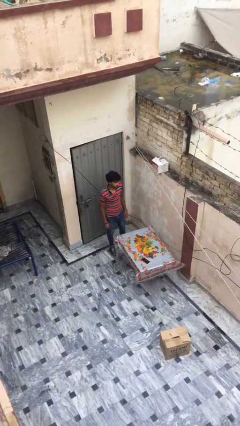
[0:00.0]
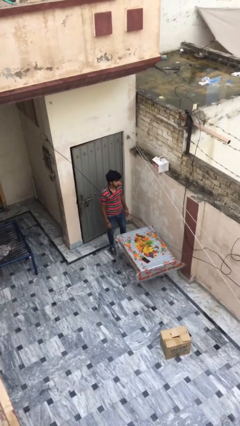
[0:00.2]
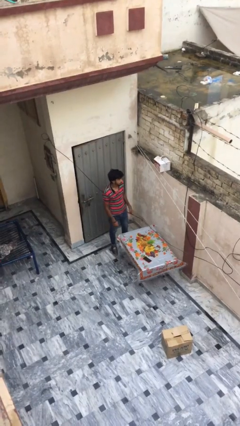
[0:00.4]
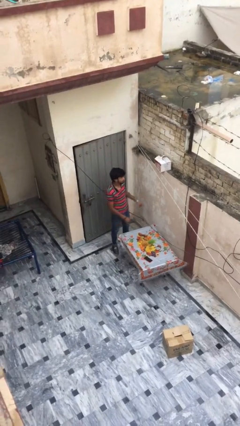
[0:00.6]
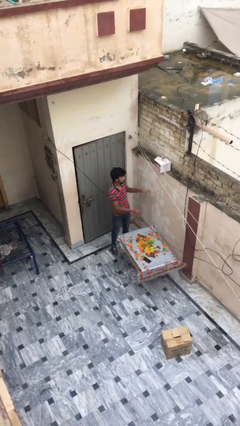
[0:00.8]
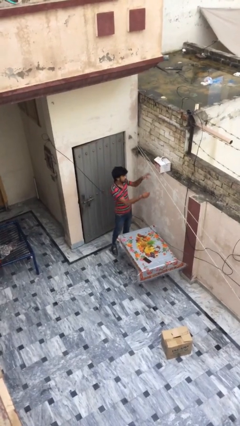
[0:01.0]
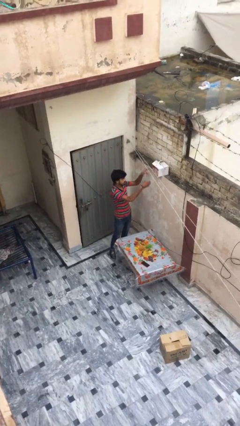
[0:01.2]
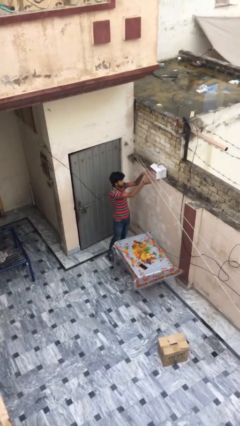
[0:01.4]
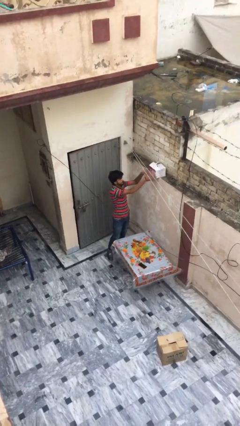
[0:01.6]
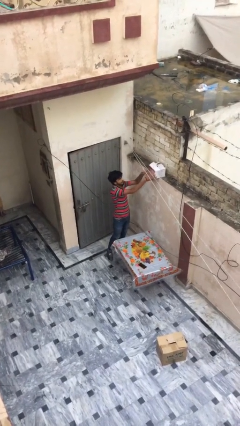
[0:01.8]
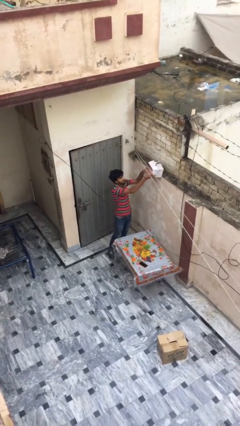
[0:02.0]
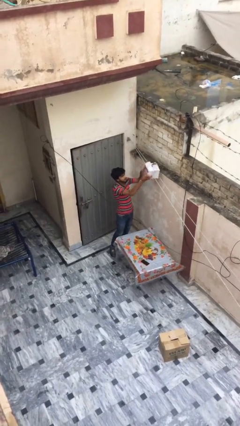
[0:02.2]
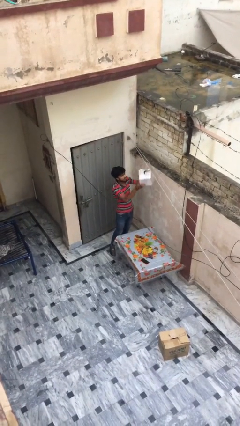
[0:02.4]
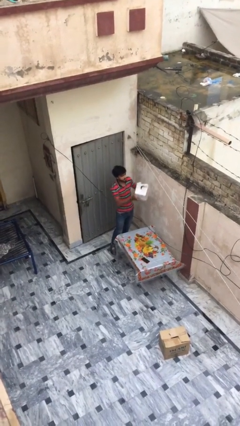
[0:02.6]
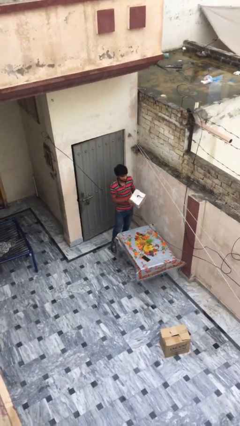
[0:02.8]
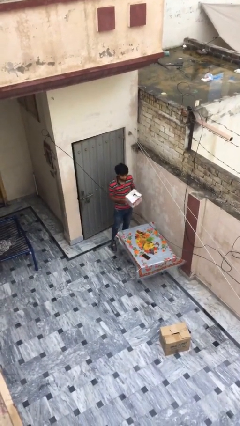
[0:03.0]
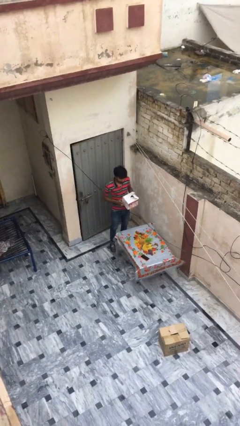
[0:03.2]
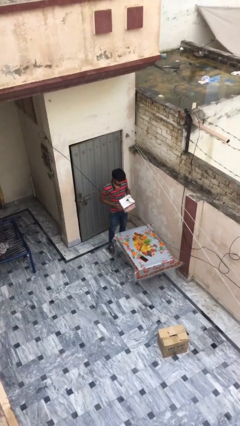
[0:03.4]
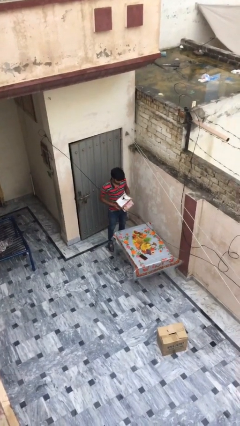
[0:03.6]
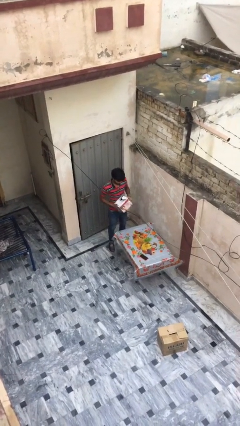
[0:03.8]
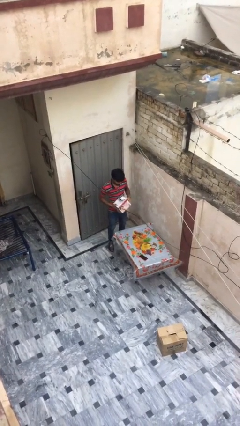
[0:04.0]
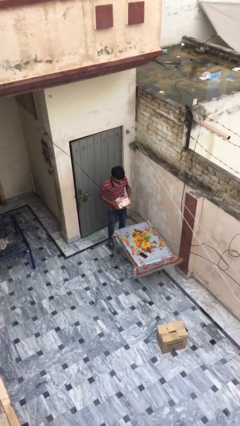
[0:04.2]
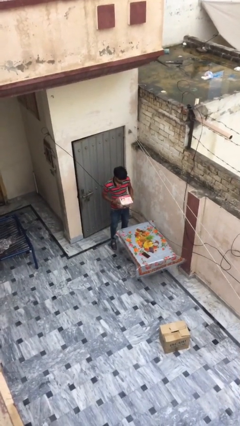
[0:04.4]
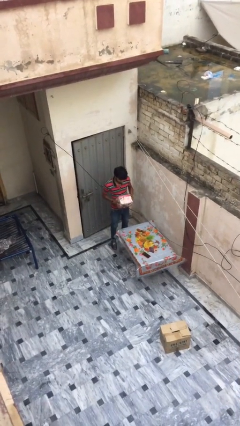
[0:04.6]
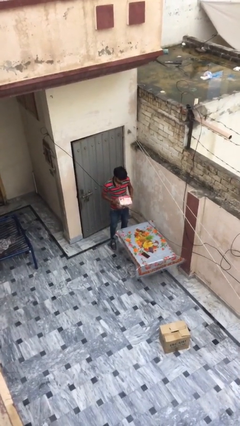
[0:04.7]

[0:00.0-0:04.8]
person picks up object from shelf

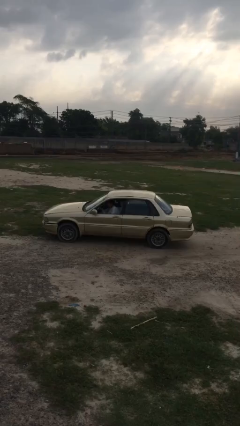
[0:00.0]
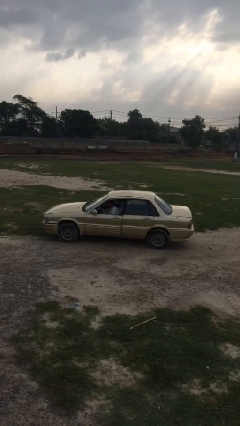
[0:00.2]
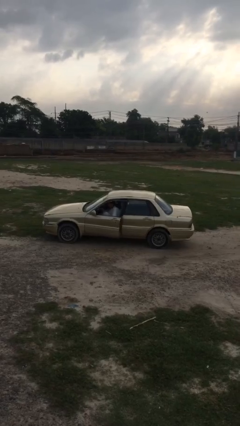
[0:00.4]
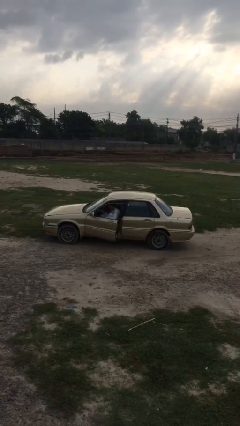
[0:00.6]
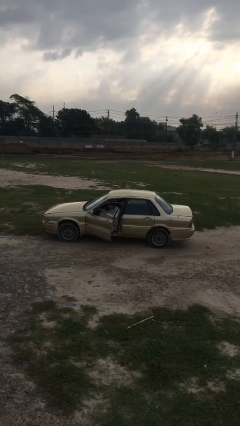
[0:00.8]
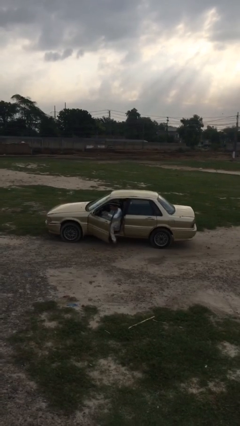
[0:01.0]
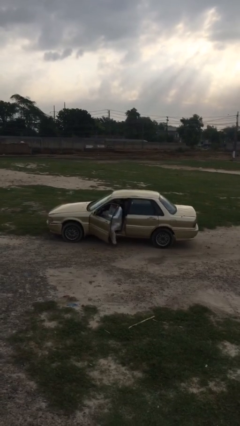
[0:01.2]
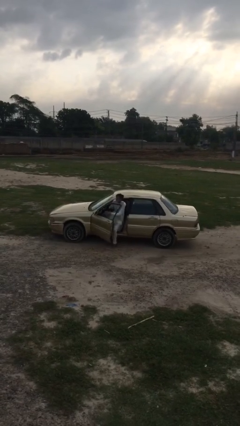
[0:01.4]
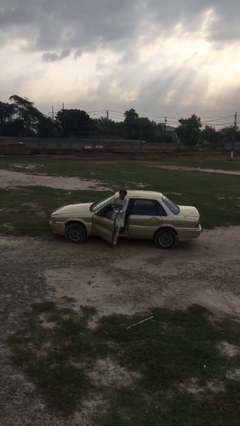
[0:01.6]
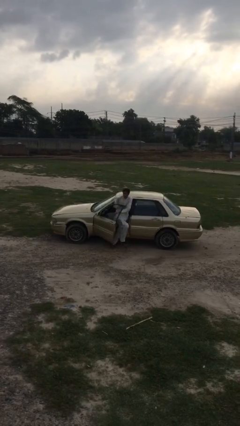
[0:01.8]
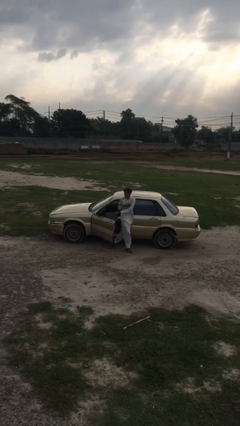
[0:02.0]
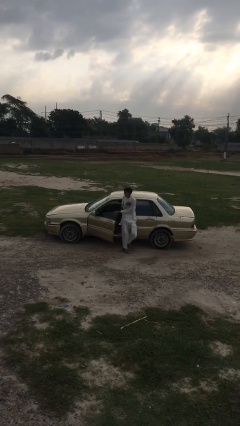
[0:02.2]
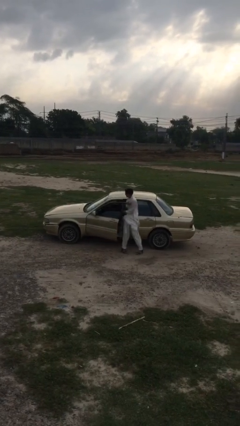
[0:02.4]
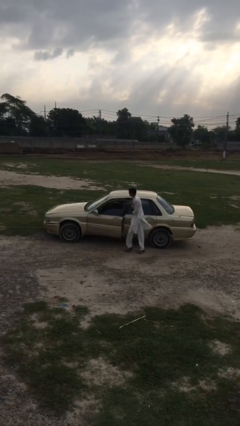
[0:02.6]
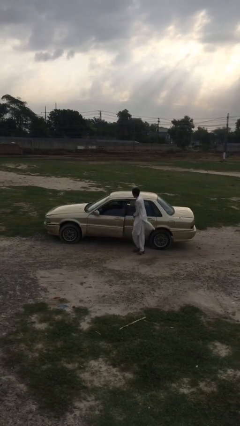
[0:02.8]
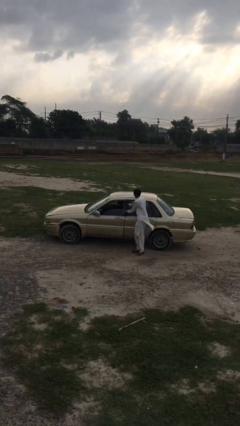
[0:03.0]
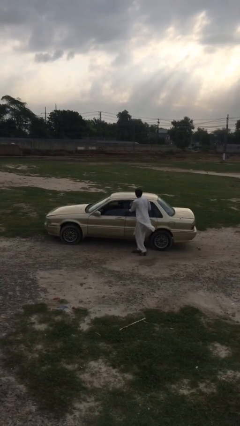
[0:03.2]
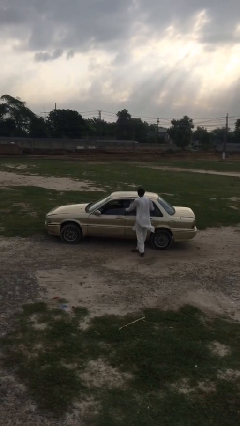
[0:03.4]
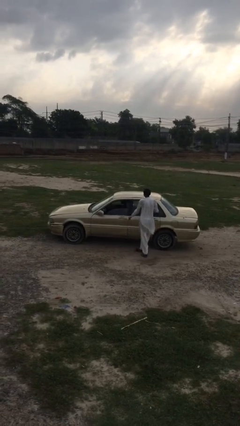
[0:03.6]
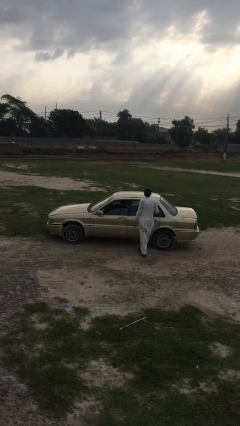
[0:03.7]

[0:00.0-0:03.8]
car drops off person

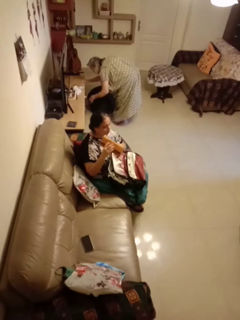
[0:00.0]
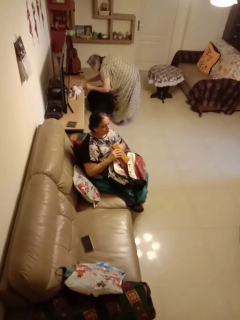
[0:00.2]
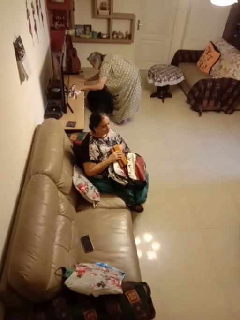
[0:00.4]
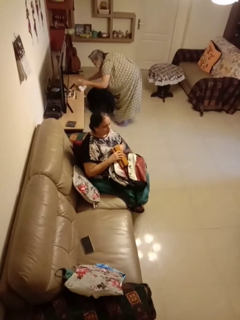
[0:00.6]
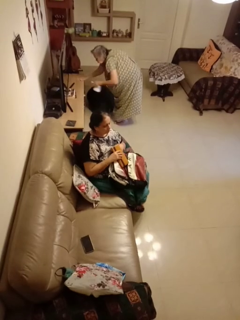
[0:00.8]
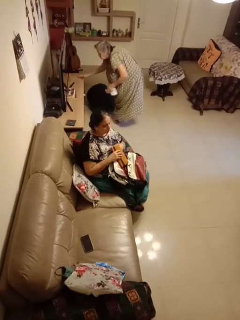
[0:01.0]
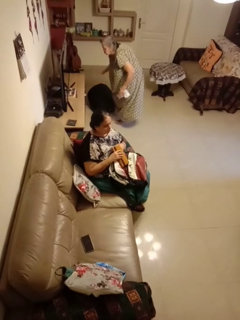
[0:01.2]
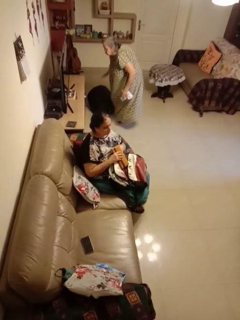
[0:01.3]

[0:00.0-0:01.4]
person takes object from backpack

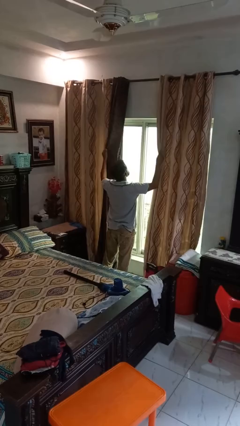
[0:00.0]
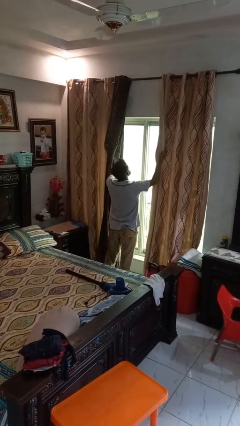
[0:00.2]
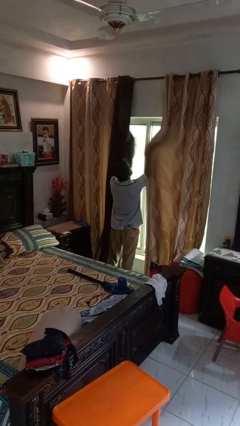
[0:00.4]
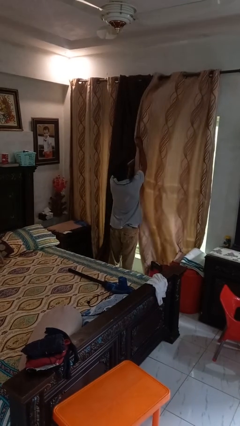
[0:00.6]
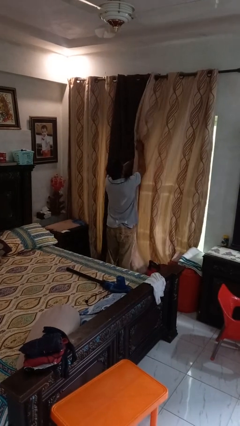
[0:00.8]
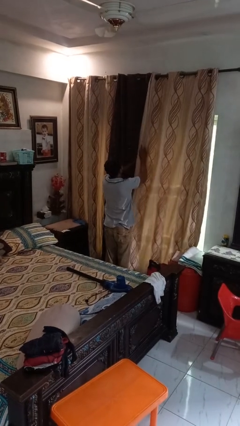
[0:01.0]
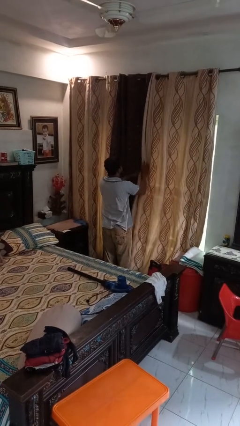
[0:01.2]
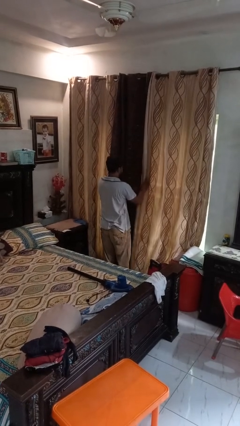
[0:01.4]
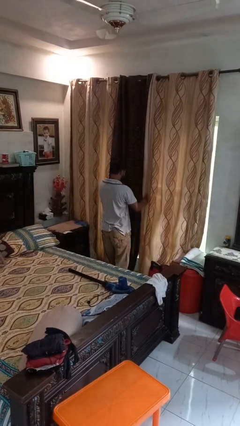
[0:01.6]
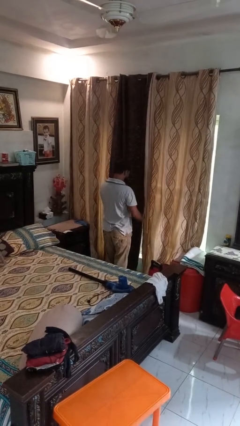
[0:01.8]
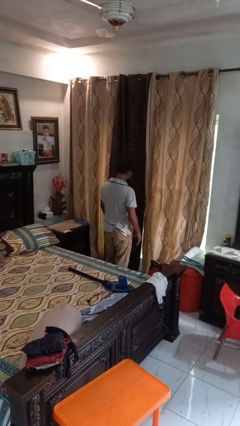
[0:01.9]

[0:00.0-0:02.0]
person closes curtains

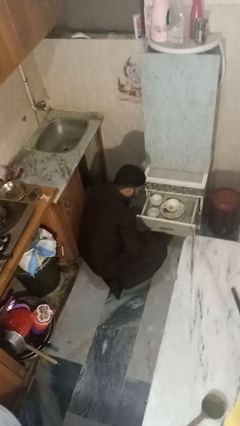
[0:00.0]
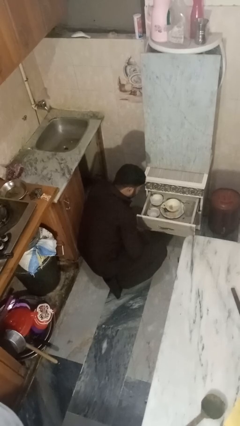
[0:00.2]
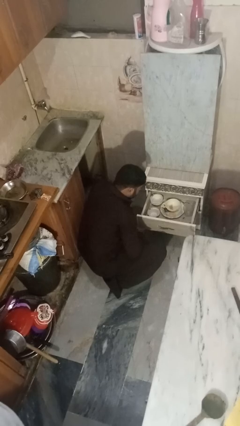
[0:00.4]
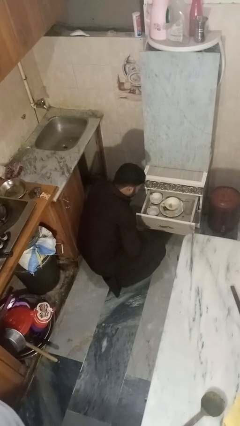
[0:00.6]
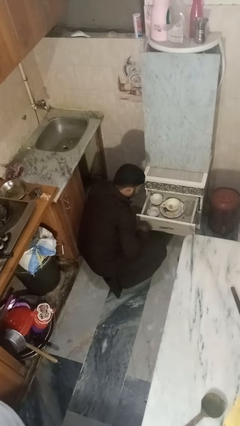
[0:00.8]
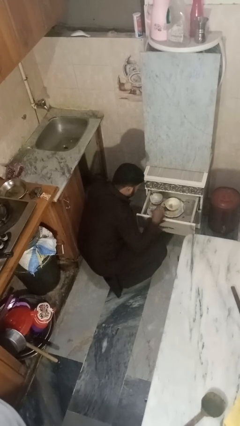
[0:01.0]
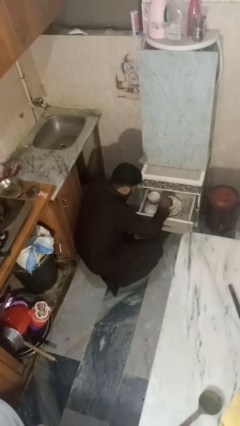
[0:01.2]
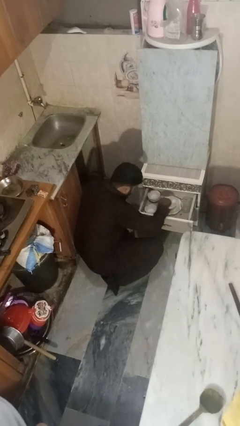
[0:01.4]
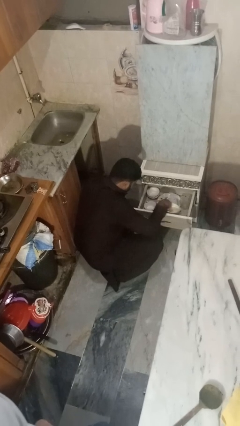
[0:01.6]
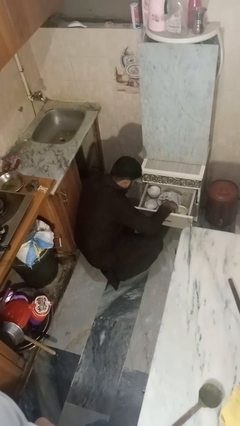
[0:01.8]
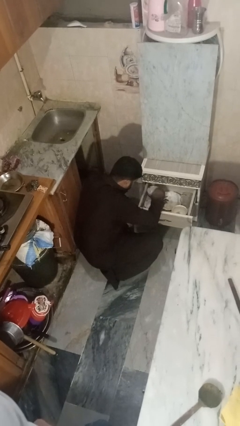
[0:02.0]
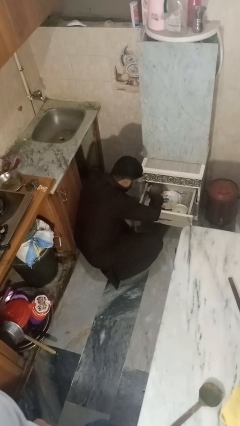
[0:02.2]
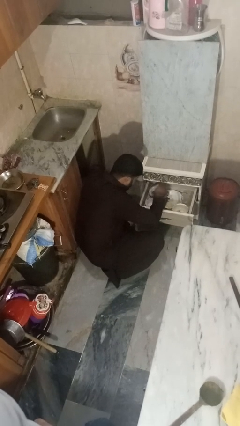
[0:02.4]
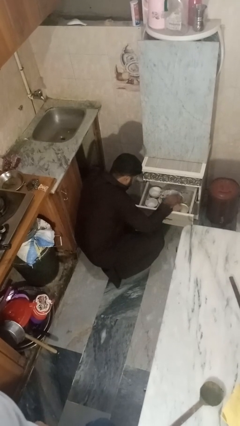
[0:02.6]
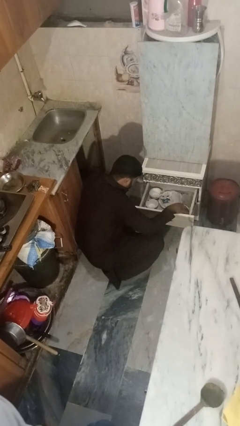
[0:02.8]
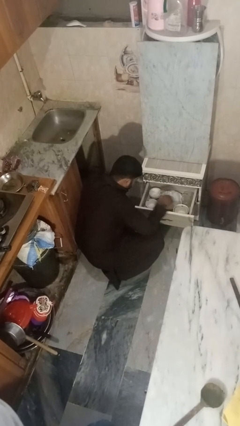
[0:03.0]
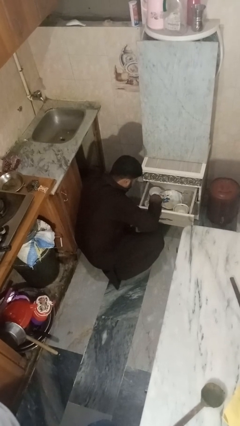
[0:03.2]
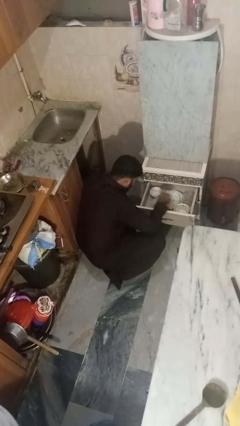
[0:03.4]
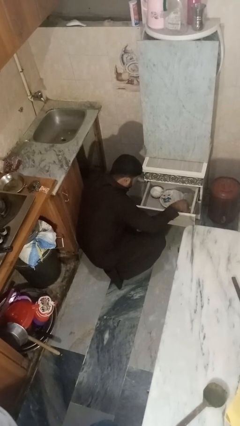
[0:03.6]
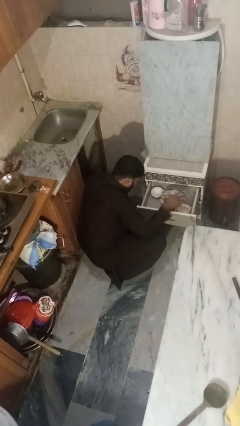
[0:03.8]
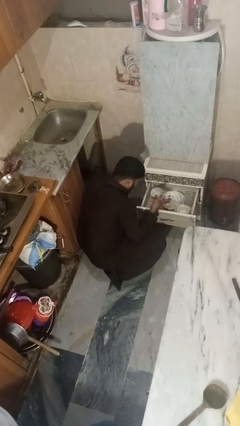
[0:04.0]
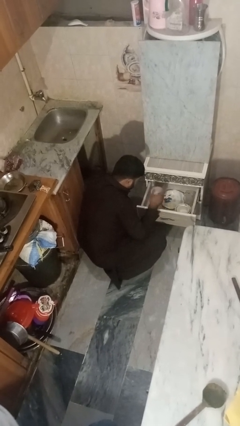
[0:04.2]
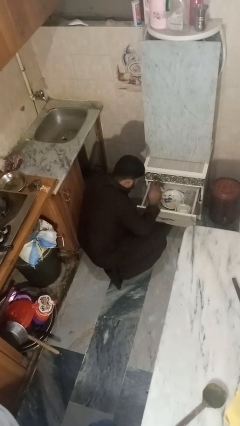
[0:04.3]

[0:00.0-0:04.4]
person searches in kitchen drawer

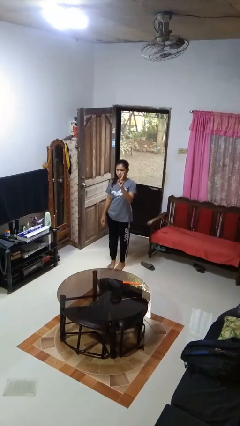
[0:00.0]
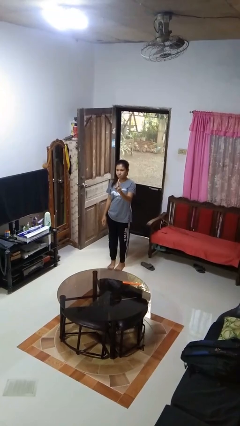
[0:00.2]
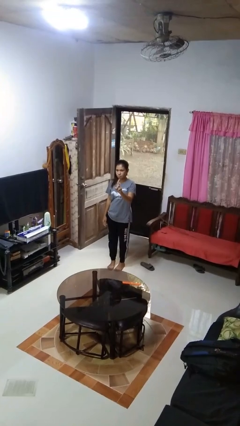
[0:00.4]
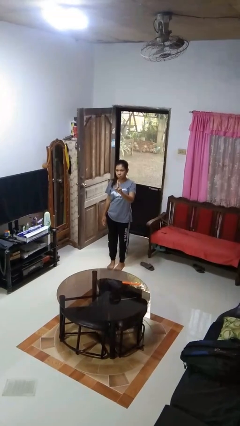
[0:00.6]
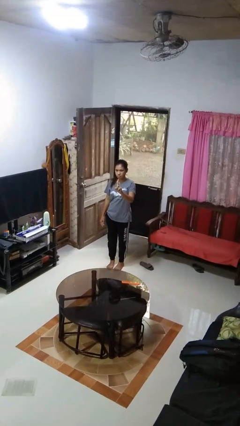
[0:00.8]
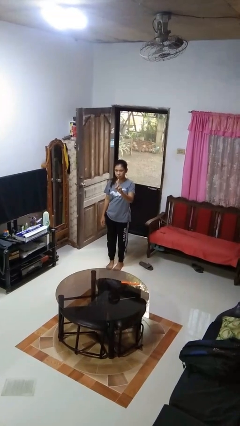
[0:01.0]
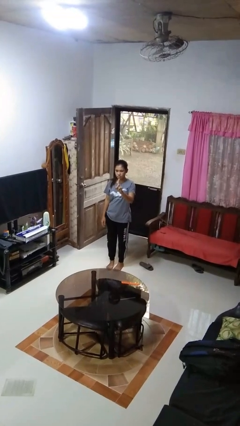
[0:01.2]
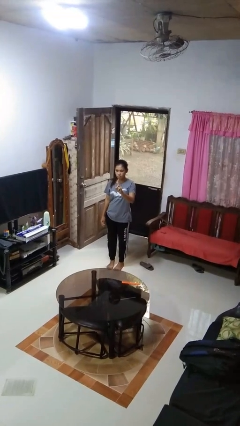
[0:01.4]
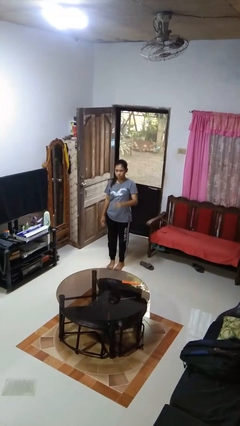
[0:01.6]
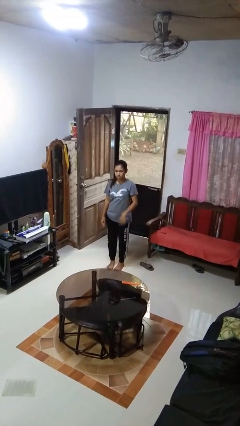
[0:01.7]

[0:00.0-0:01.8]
person gestures number one
